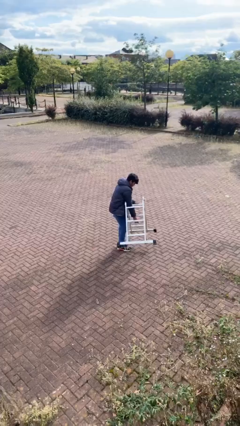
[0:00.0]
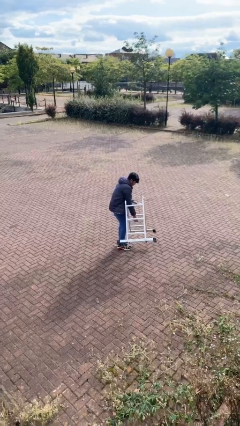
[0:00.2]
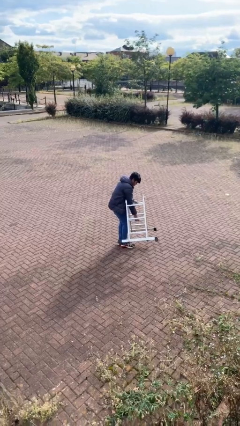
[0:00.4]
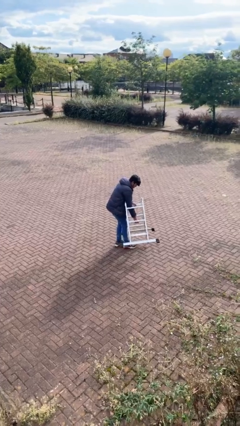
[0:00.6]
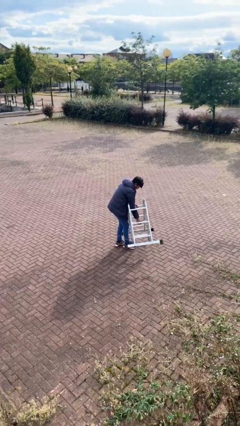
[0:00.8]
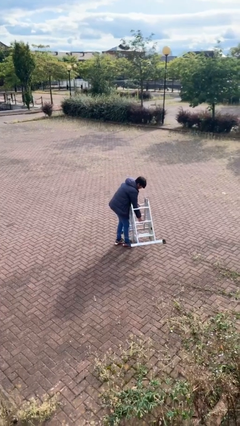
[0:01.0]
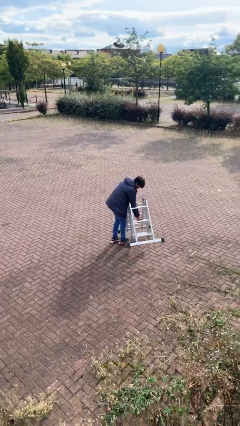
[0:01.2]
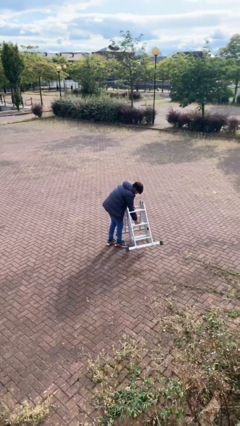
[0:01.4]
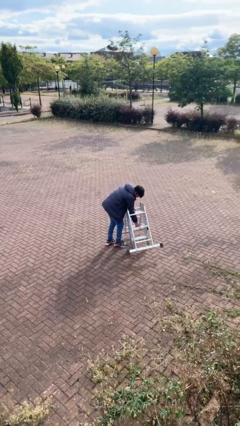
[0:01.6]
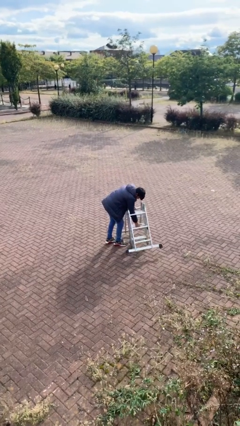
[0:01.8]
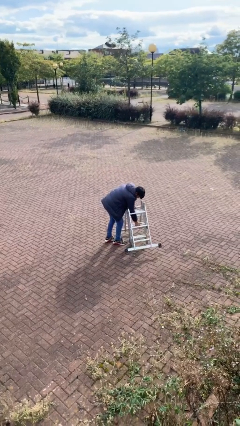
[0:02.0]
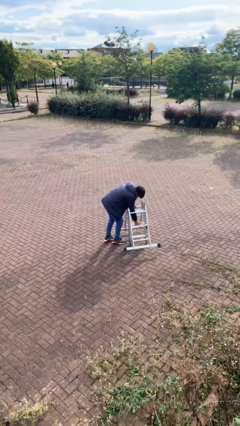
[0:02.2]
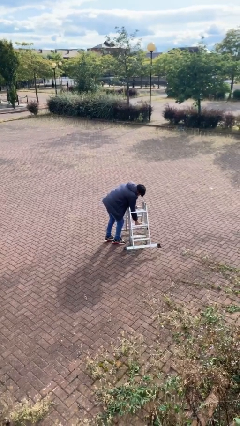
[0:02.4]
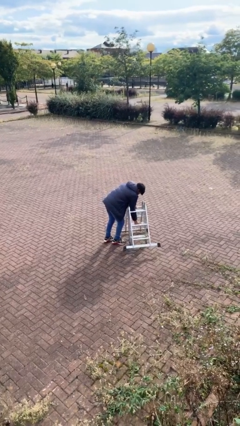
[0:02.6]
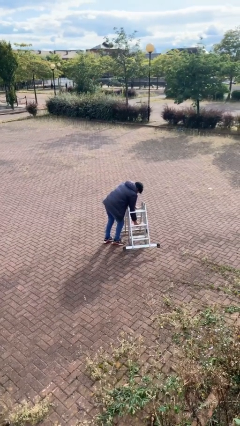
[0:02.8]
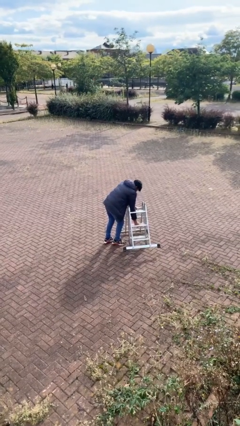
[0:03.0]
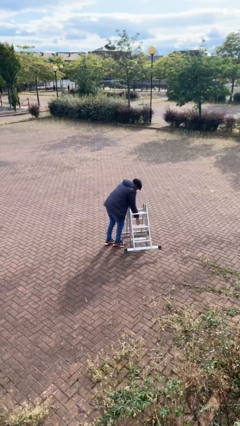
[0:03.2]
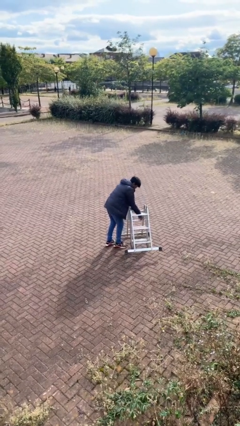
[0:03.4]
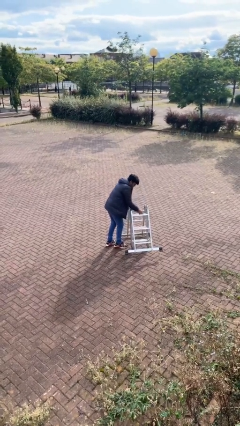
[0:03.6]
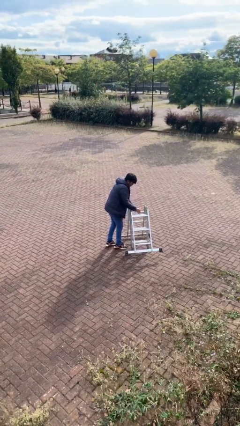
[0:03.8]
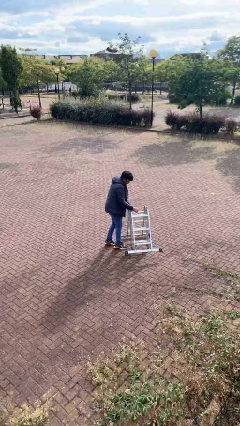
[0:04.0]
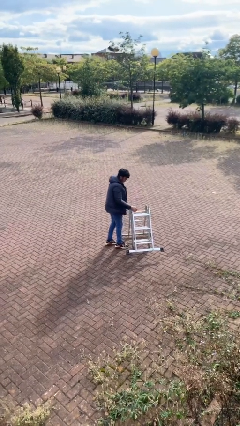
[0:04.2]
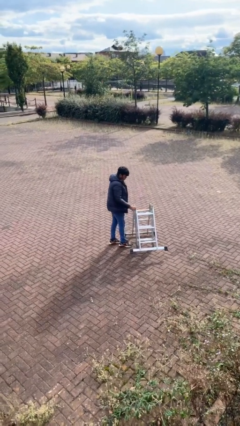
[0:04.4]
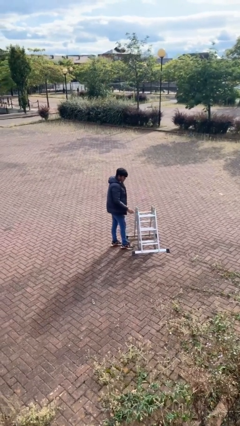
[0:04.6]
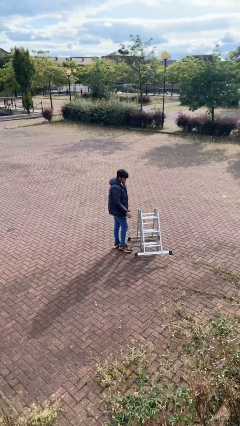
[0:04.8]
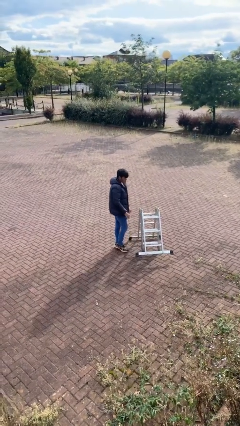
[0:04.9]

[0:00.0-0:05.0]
person puts down object on floor

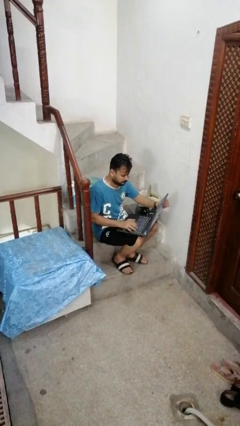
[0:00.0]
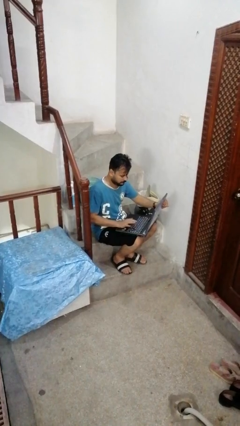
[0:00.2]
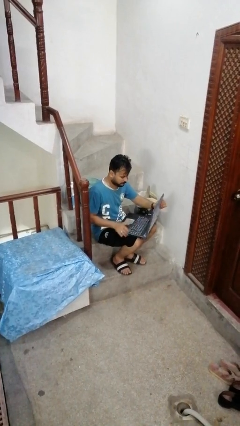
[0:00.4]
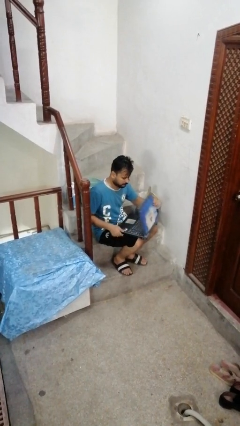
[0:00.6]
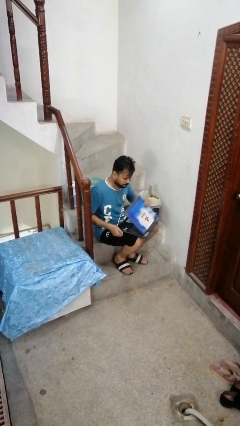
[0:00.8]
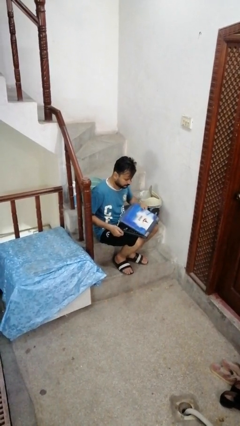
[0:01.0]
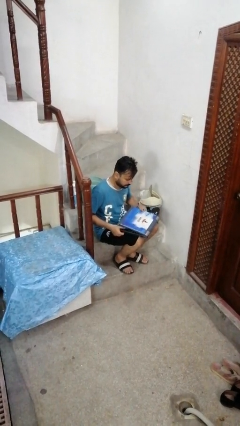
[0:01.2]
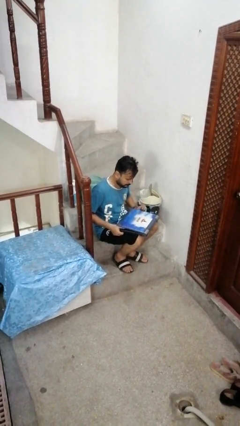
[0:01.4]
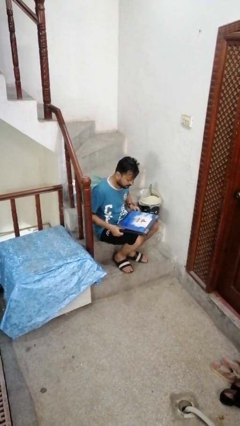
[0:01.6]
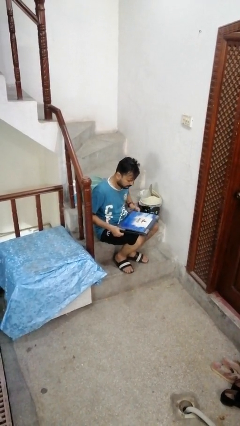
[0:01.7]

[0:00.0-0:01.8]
person closes laptop

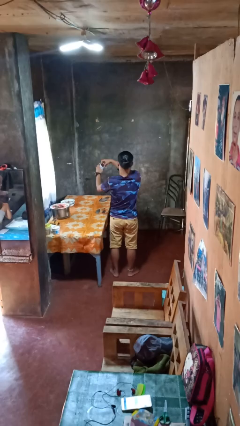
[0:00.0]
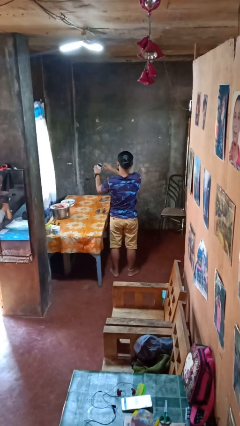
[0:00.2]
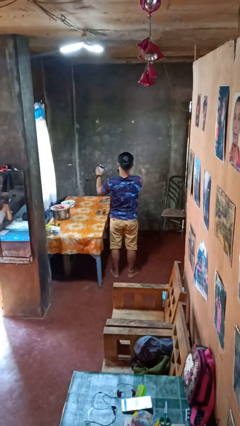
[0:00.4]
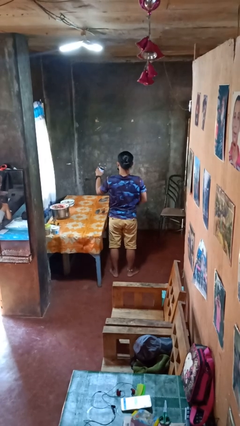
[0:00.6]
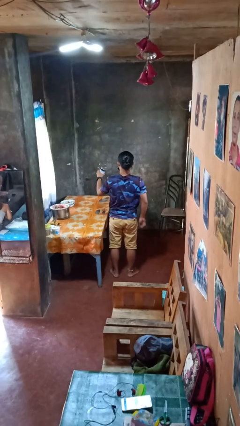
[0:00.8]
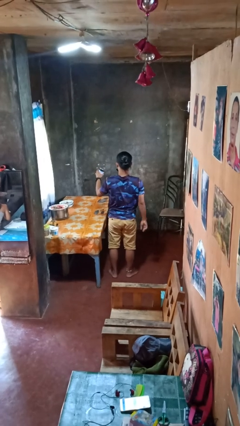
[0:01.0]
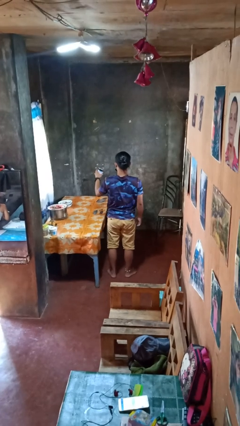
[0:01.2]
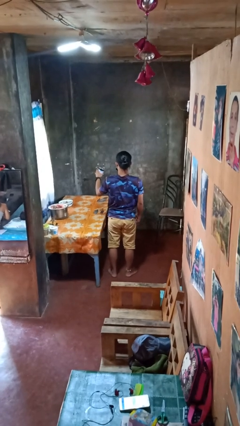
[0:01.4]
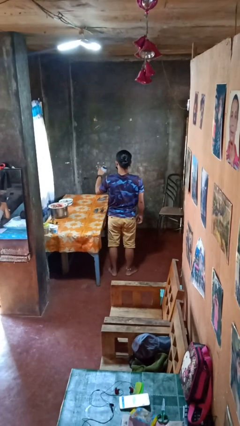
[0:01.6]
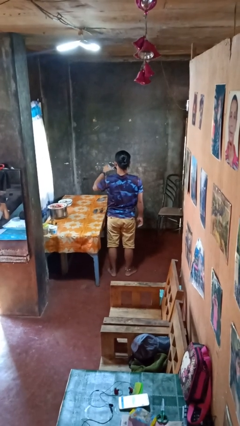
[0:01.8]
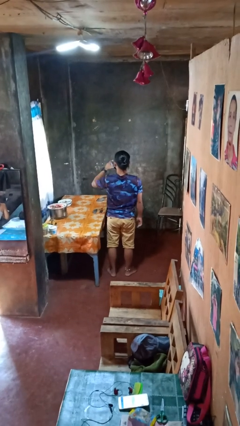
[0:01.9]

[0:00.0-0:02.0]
person opens beverage can

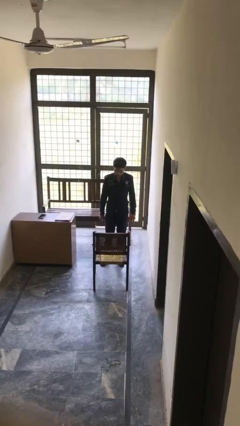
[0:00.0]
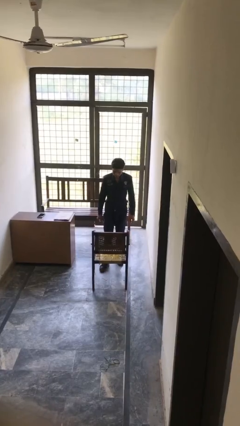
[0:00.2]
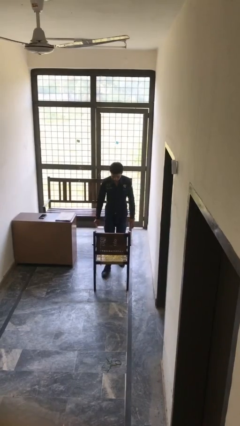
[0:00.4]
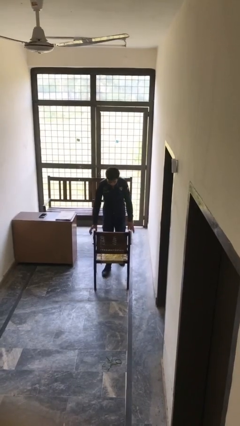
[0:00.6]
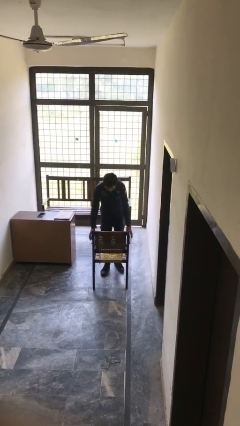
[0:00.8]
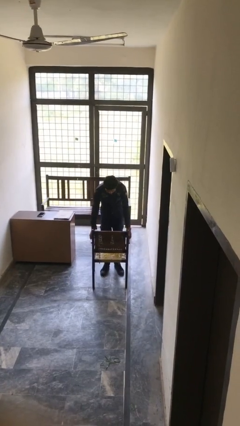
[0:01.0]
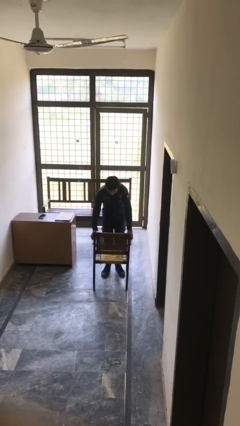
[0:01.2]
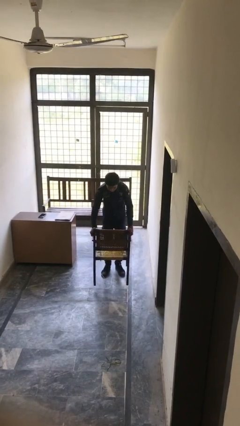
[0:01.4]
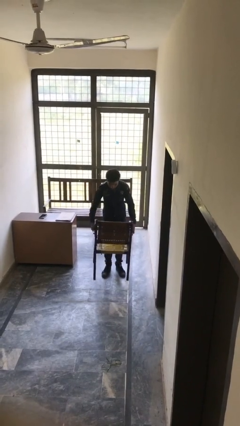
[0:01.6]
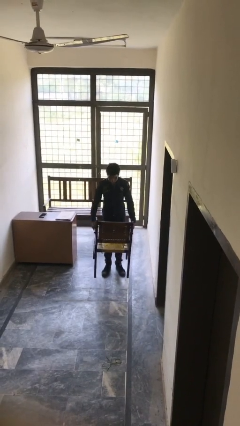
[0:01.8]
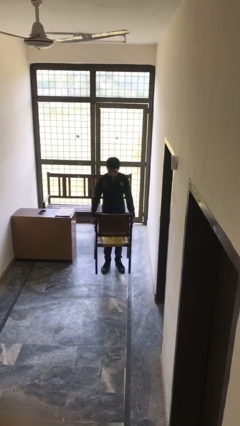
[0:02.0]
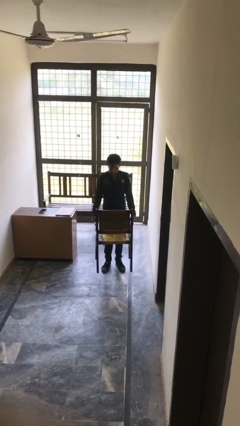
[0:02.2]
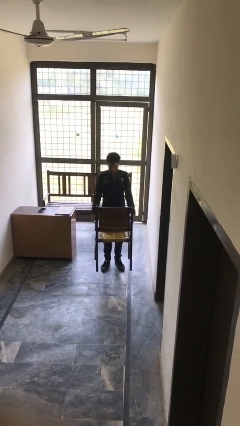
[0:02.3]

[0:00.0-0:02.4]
person picks up object from floor

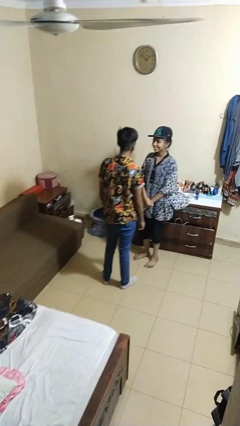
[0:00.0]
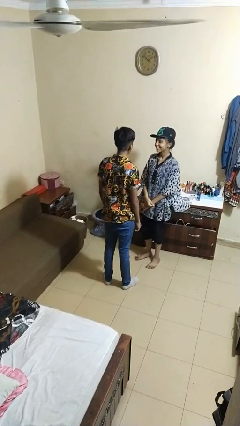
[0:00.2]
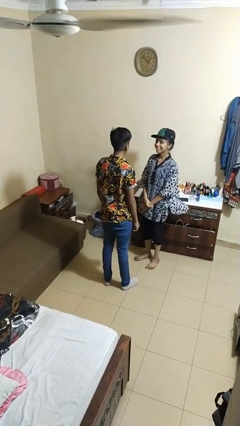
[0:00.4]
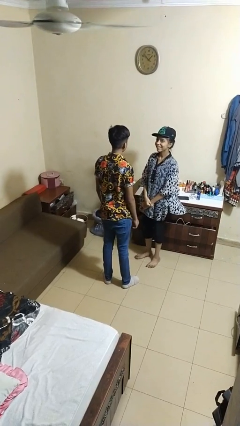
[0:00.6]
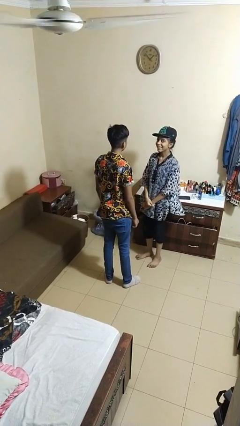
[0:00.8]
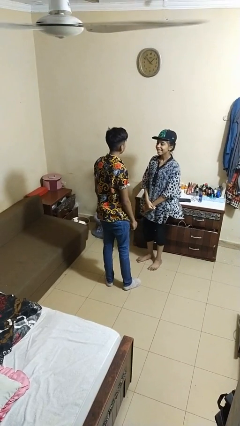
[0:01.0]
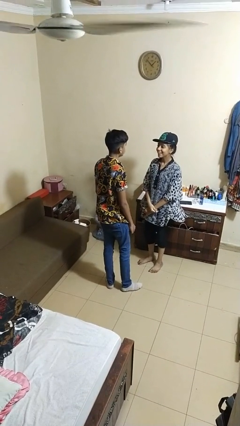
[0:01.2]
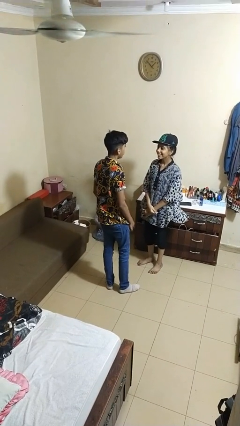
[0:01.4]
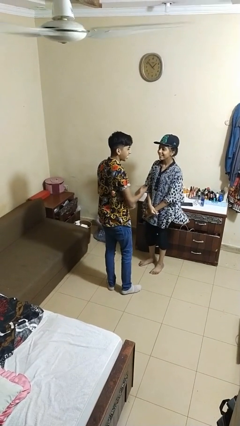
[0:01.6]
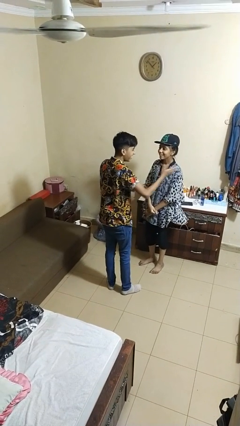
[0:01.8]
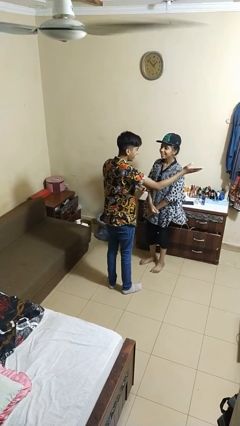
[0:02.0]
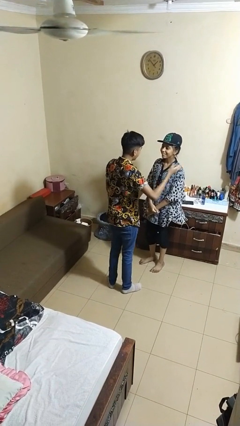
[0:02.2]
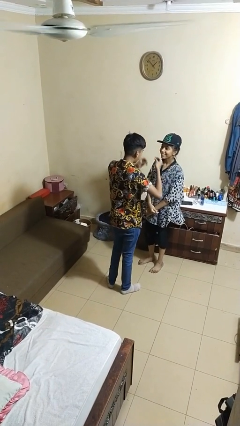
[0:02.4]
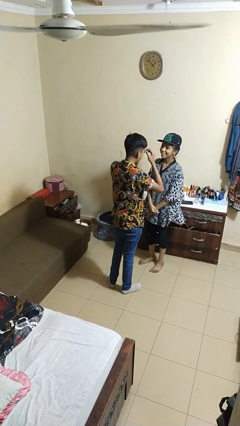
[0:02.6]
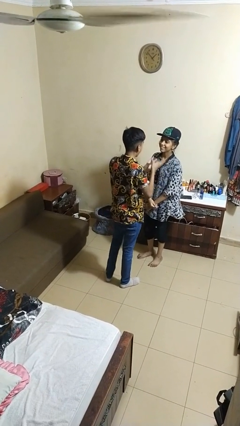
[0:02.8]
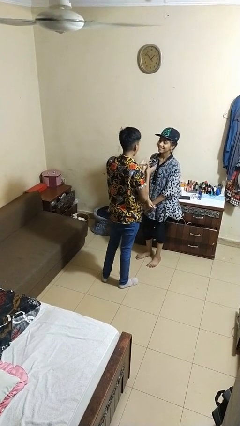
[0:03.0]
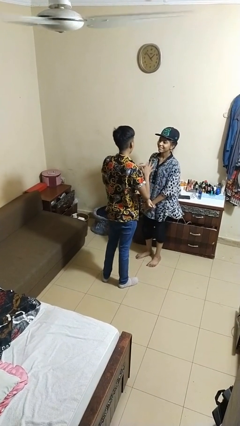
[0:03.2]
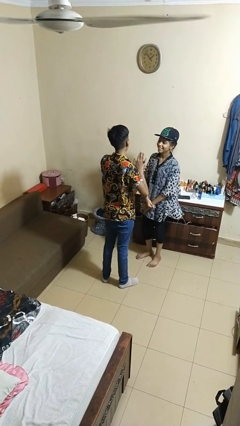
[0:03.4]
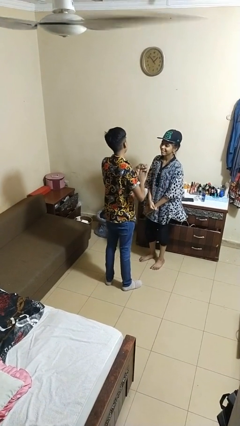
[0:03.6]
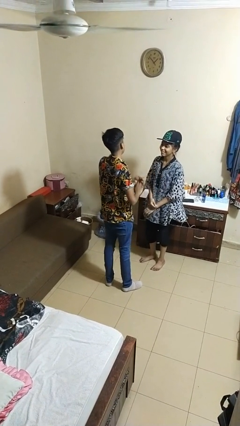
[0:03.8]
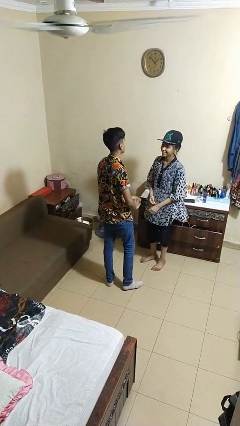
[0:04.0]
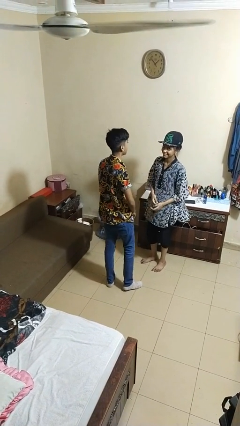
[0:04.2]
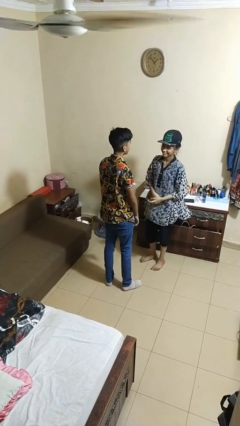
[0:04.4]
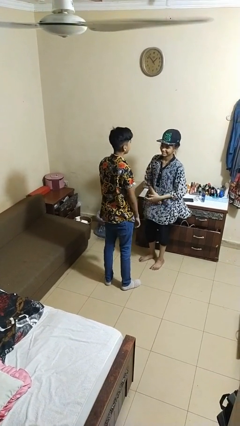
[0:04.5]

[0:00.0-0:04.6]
person laughs with person

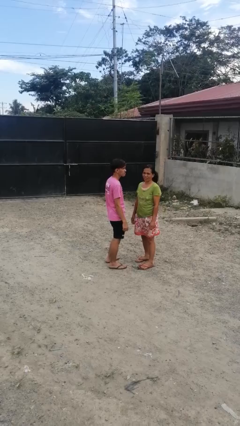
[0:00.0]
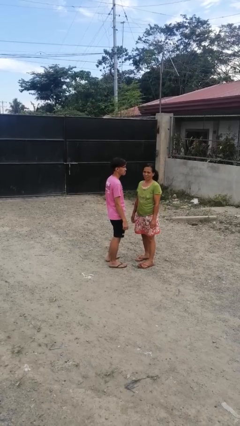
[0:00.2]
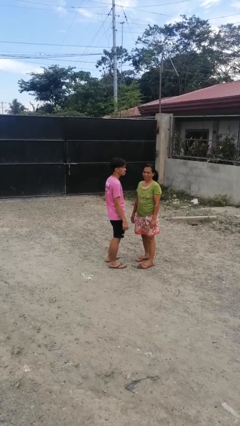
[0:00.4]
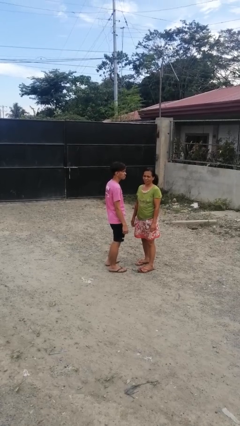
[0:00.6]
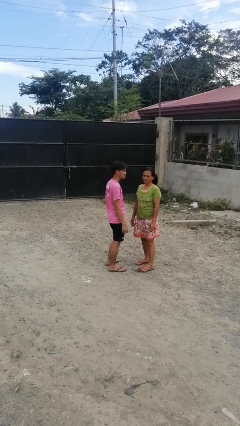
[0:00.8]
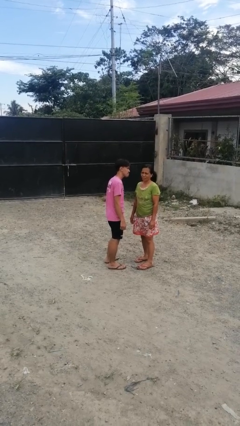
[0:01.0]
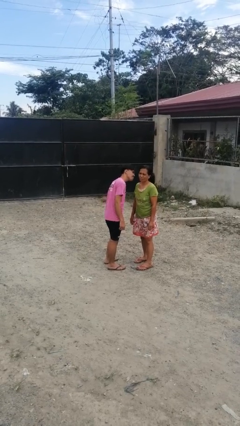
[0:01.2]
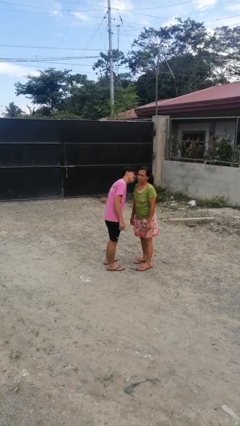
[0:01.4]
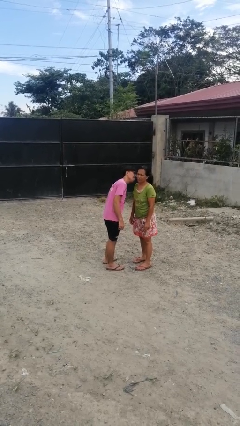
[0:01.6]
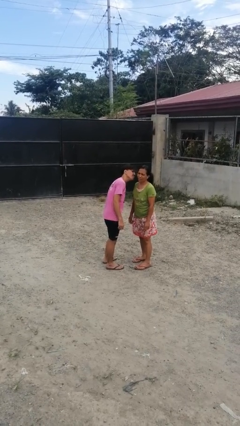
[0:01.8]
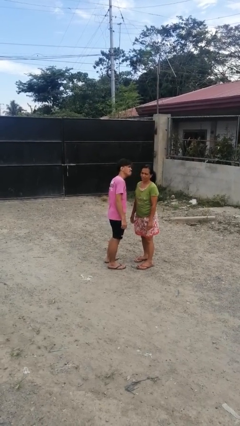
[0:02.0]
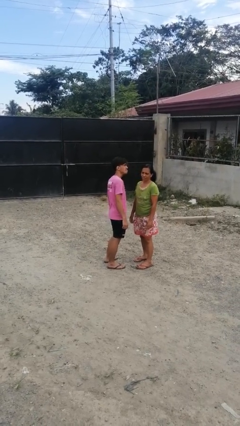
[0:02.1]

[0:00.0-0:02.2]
person kisses cheek of person
